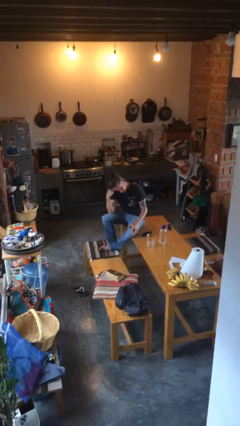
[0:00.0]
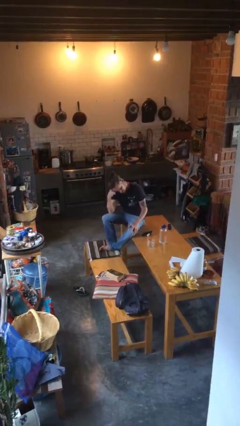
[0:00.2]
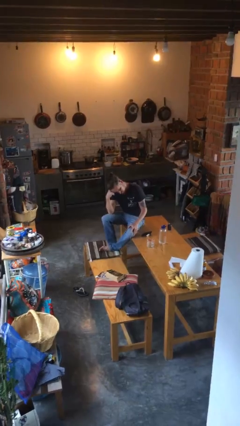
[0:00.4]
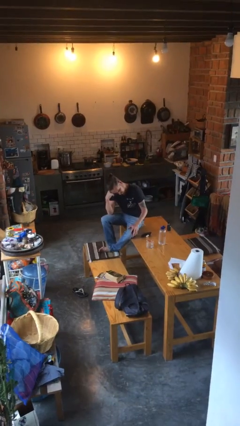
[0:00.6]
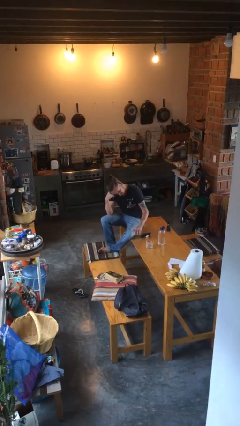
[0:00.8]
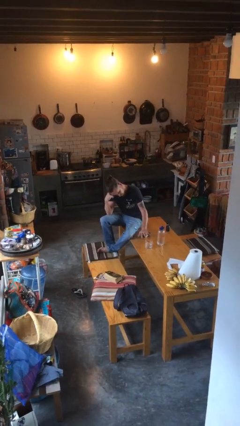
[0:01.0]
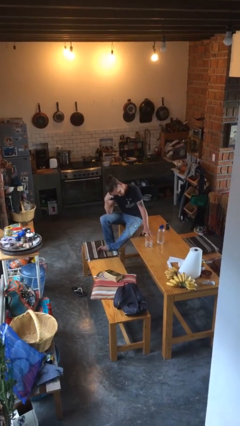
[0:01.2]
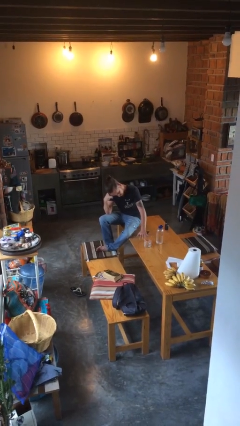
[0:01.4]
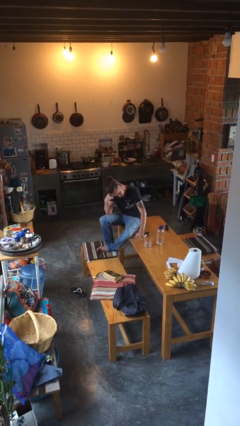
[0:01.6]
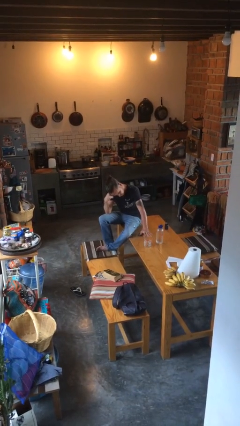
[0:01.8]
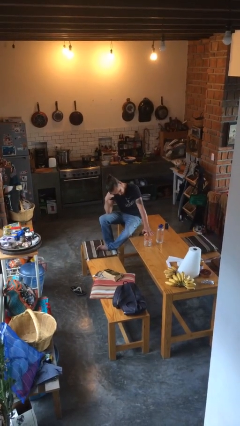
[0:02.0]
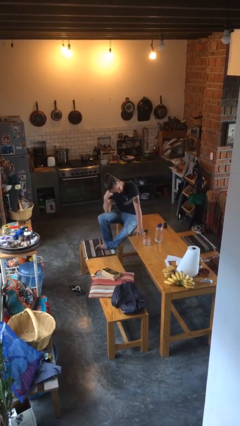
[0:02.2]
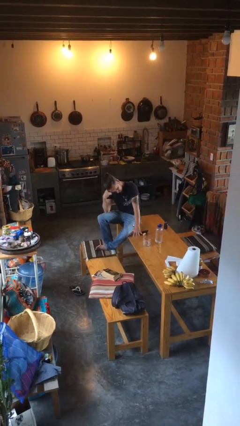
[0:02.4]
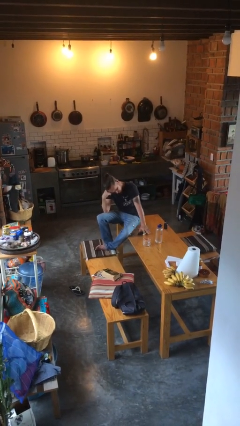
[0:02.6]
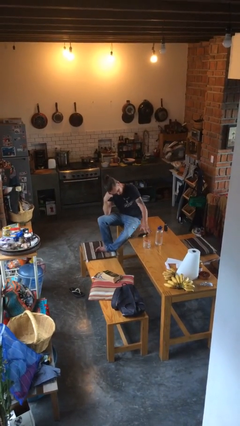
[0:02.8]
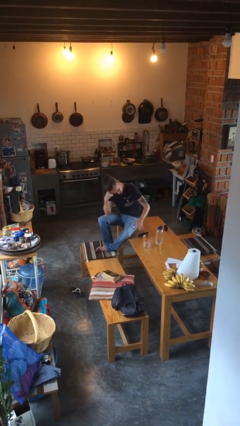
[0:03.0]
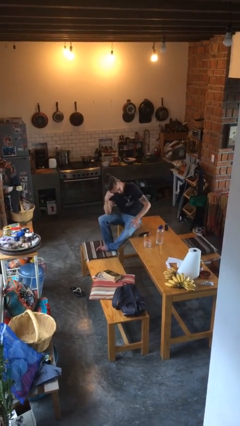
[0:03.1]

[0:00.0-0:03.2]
person waves hand over object

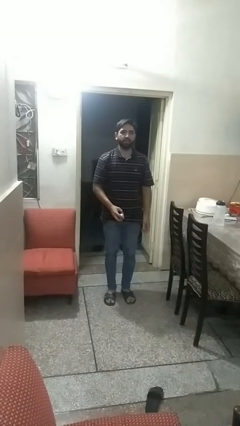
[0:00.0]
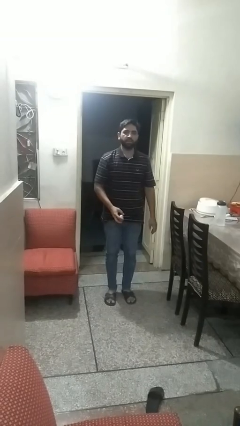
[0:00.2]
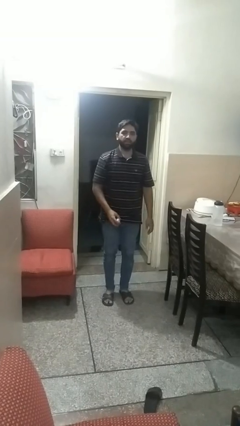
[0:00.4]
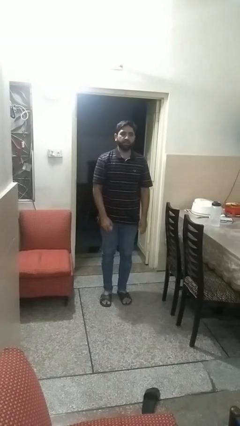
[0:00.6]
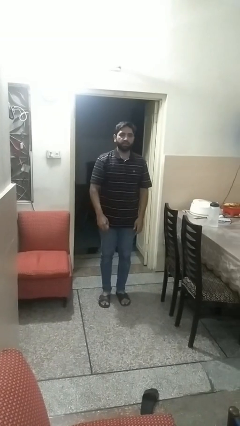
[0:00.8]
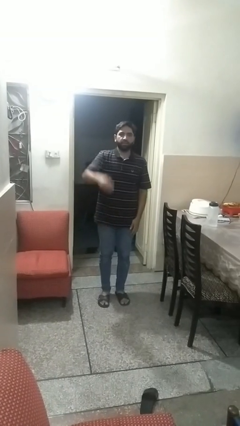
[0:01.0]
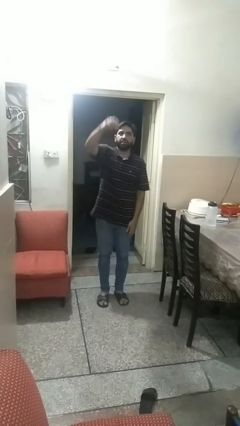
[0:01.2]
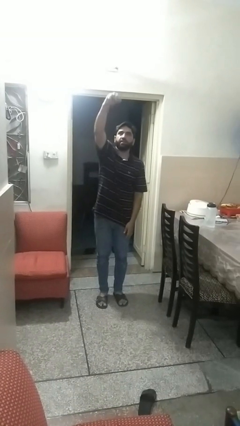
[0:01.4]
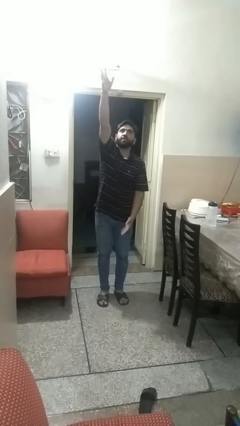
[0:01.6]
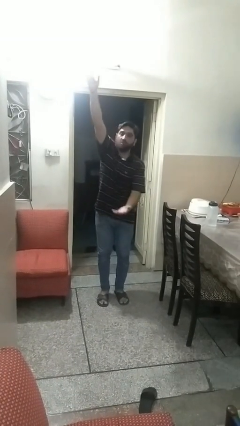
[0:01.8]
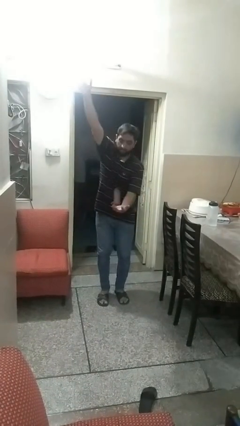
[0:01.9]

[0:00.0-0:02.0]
person drops object

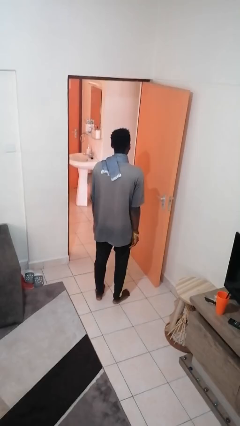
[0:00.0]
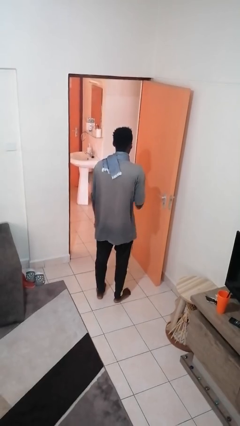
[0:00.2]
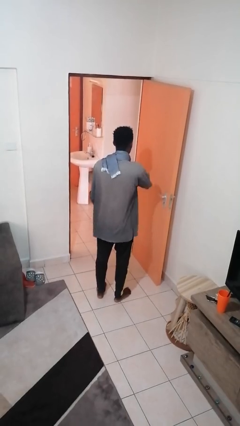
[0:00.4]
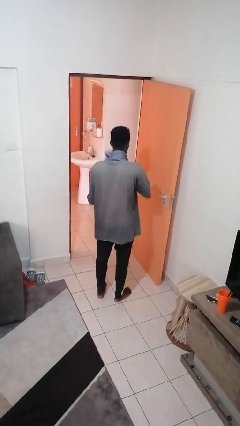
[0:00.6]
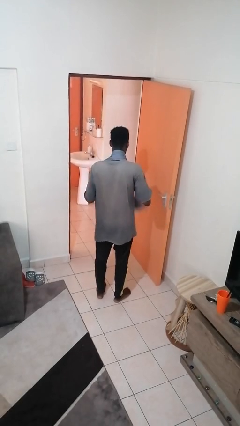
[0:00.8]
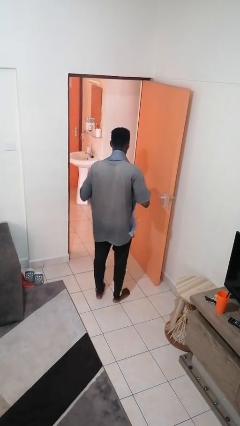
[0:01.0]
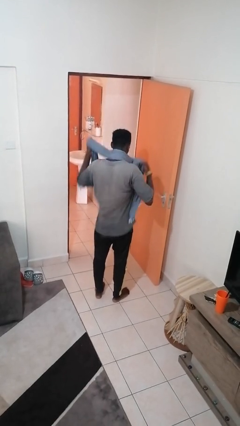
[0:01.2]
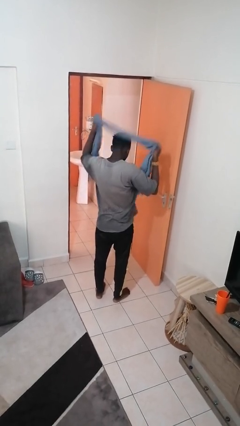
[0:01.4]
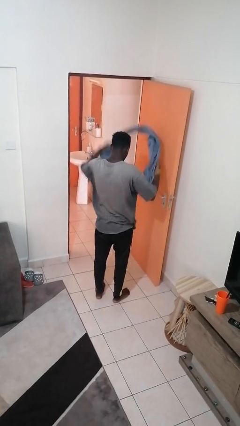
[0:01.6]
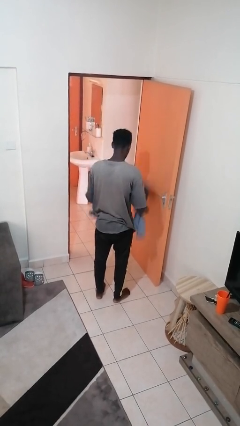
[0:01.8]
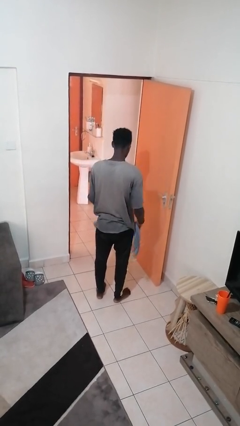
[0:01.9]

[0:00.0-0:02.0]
person takes off scarf

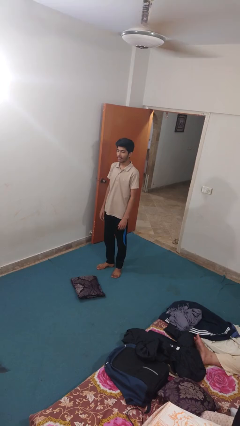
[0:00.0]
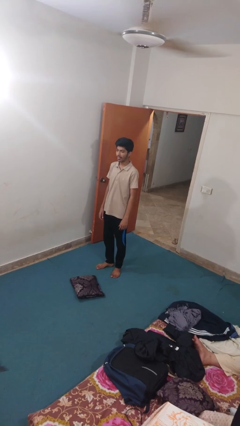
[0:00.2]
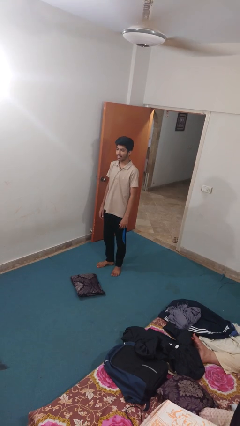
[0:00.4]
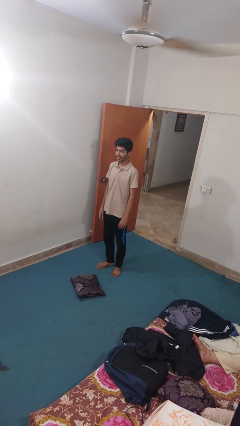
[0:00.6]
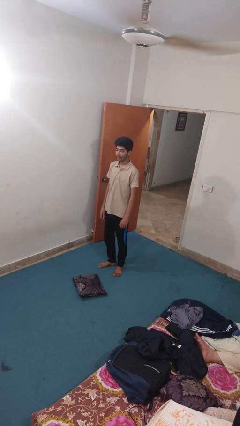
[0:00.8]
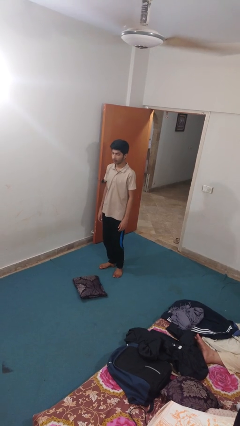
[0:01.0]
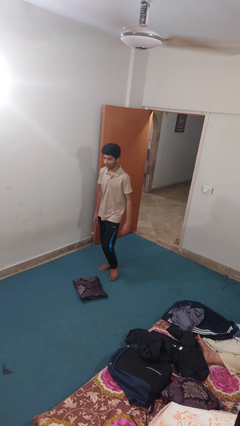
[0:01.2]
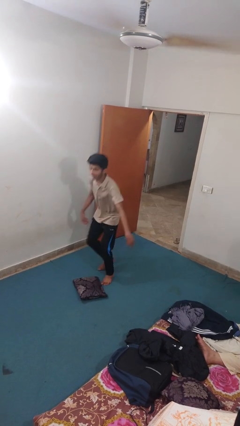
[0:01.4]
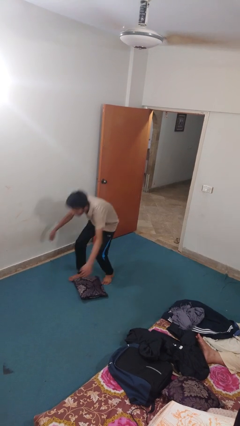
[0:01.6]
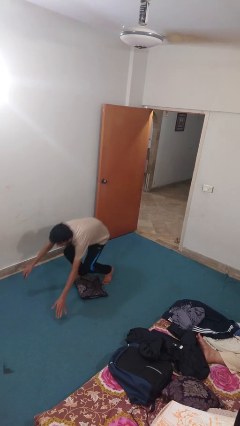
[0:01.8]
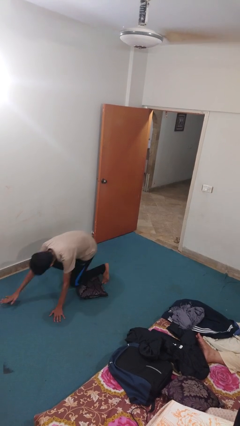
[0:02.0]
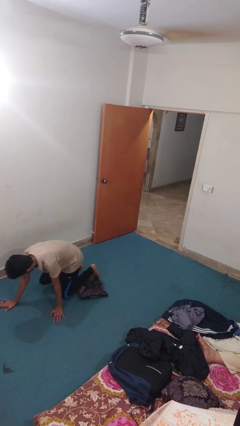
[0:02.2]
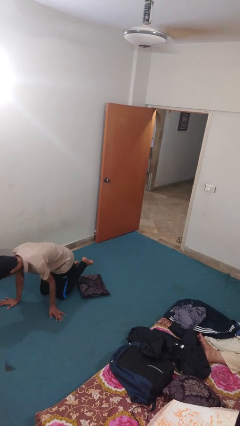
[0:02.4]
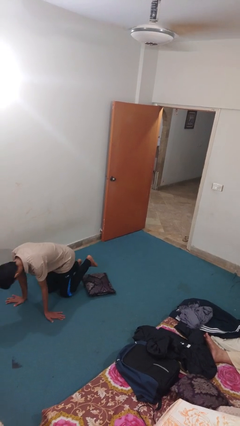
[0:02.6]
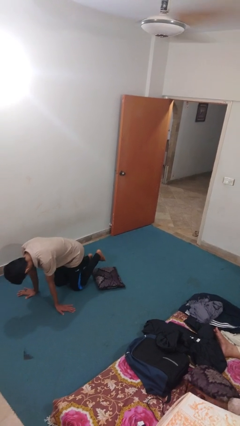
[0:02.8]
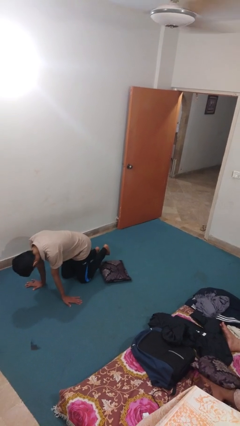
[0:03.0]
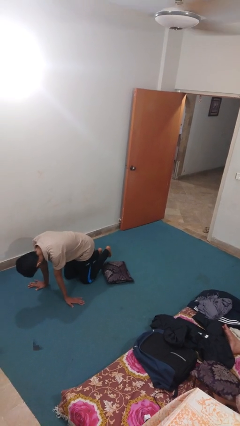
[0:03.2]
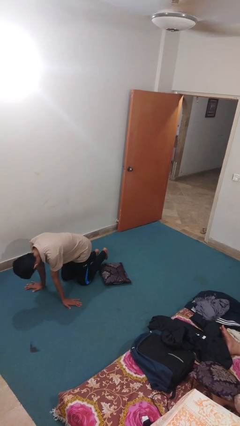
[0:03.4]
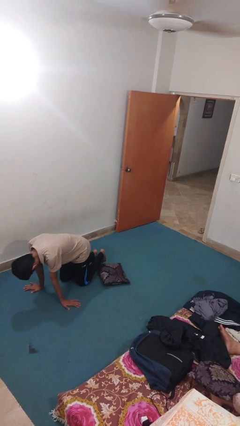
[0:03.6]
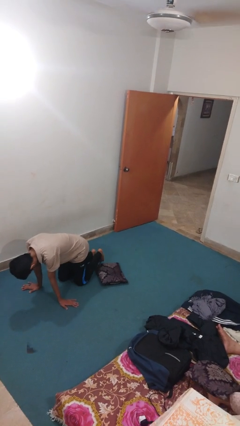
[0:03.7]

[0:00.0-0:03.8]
person trips on object on floor

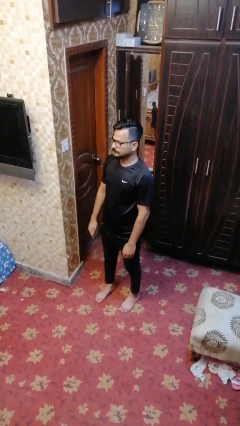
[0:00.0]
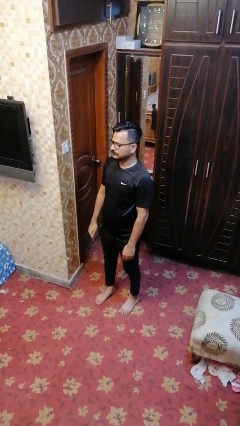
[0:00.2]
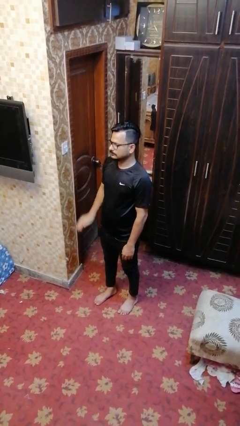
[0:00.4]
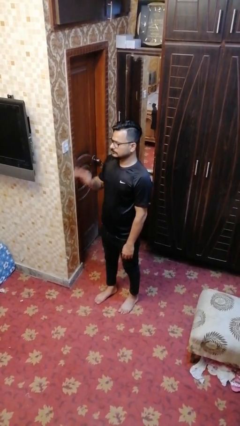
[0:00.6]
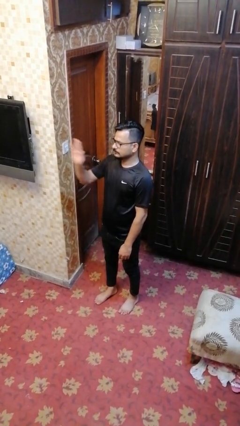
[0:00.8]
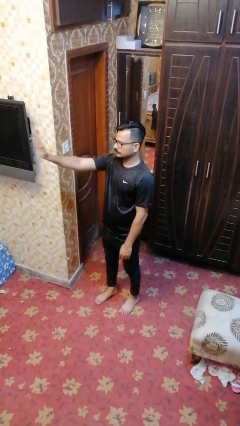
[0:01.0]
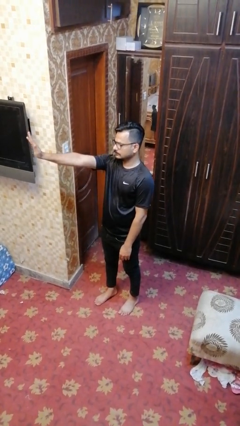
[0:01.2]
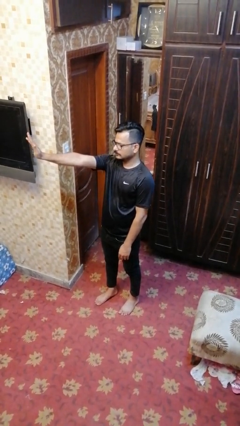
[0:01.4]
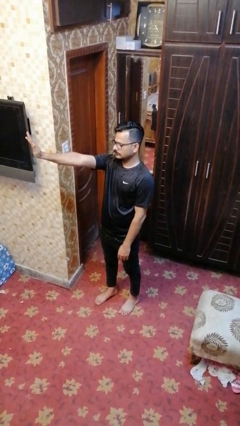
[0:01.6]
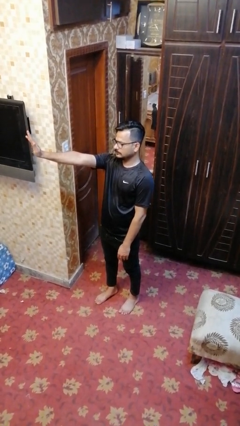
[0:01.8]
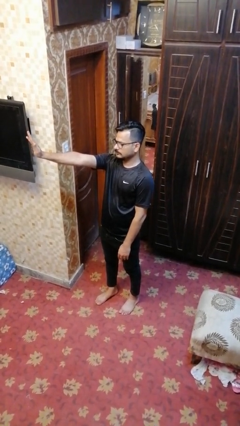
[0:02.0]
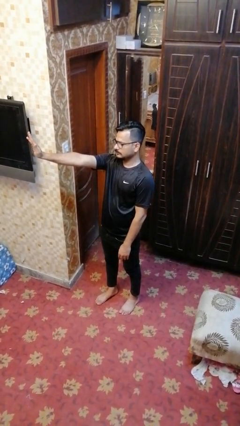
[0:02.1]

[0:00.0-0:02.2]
person gestures stop

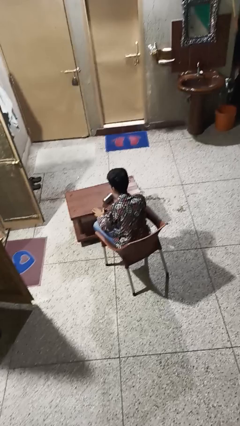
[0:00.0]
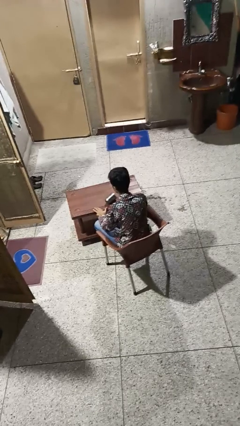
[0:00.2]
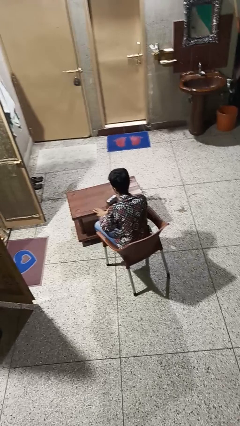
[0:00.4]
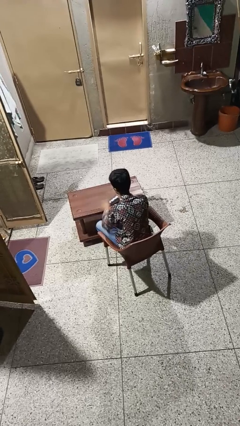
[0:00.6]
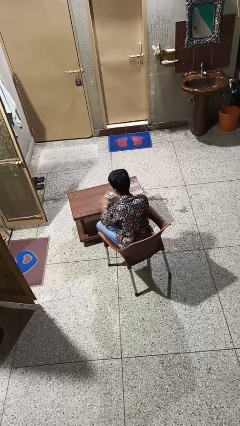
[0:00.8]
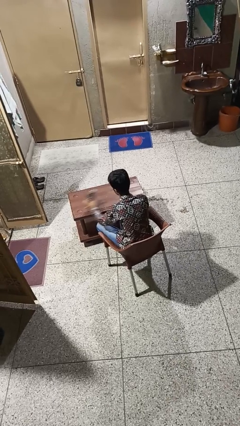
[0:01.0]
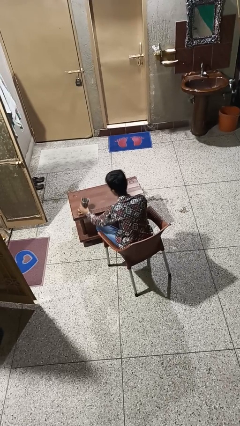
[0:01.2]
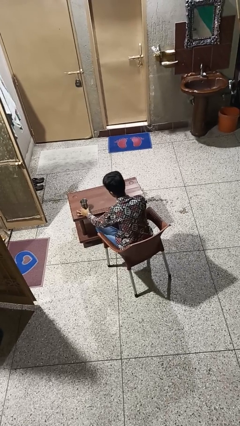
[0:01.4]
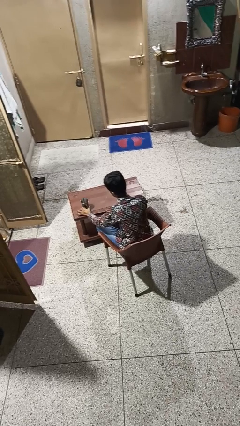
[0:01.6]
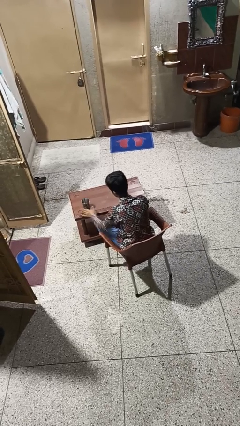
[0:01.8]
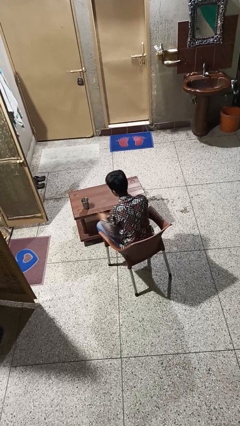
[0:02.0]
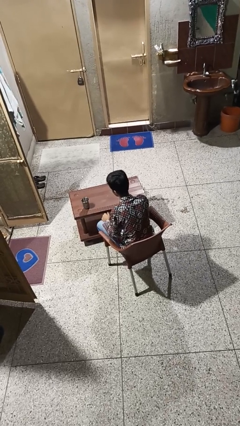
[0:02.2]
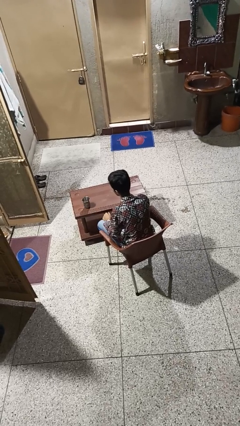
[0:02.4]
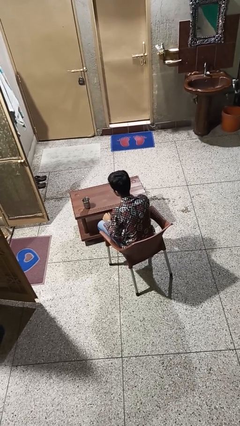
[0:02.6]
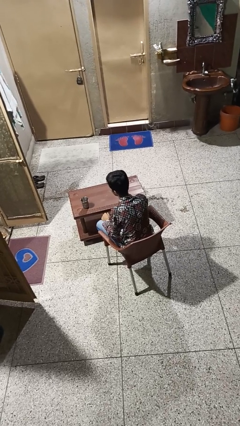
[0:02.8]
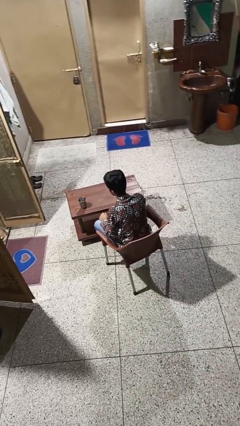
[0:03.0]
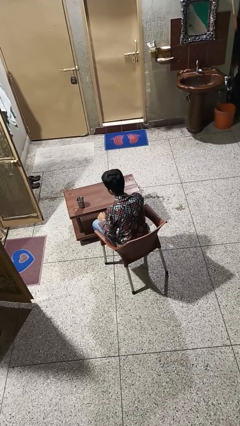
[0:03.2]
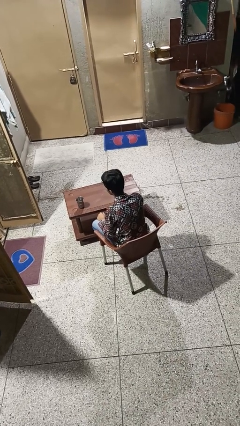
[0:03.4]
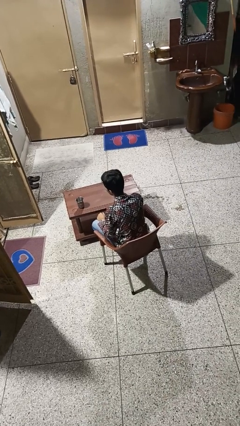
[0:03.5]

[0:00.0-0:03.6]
person sets upright glass

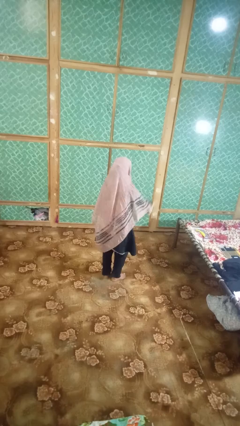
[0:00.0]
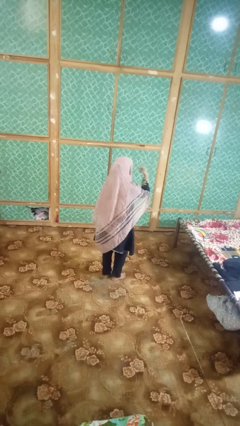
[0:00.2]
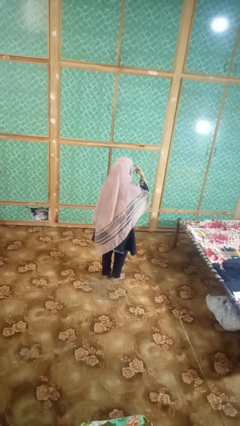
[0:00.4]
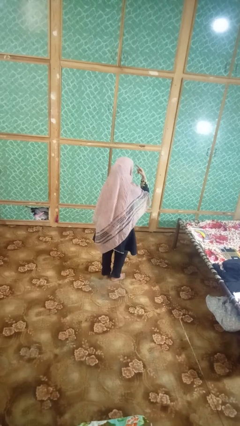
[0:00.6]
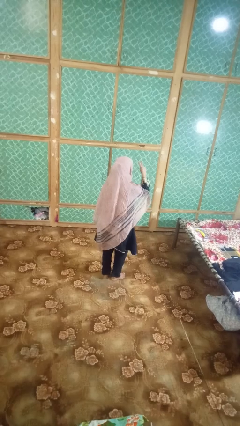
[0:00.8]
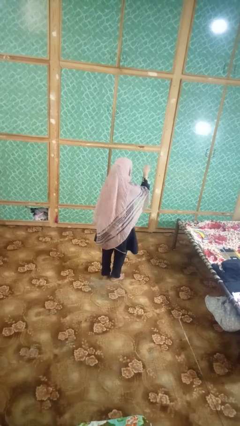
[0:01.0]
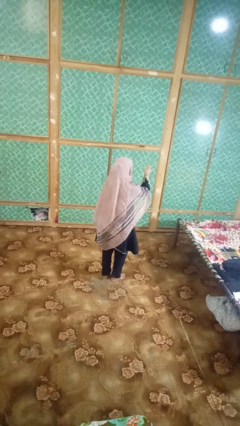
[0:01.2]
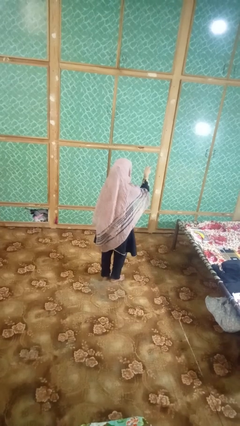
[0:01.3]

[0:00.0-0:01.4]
person gestures behind me
